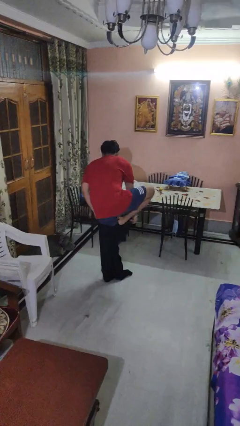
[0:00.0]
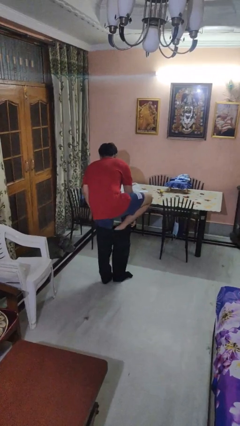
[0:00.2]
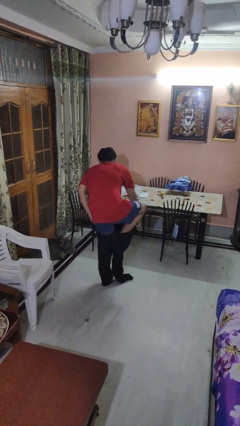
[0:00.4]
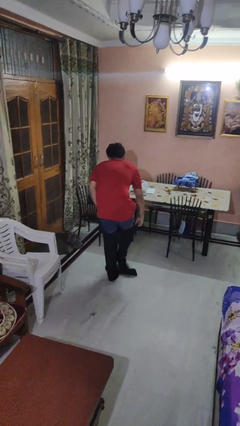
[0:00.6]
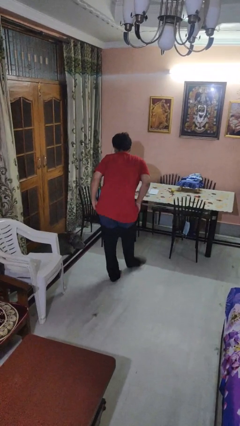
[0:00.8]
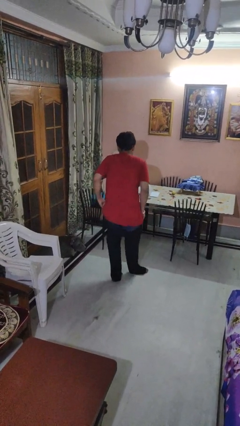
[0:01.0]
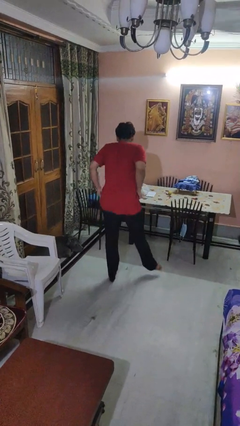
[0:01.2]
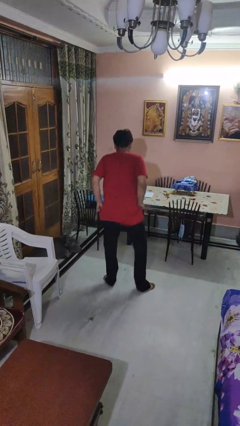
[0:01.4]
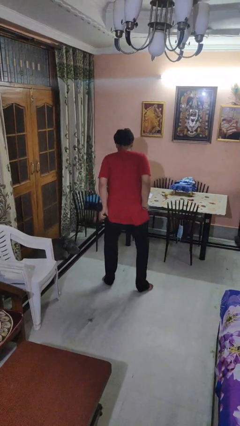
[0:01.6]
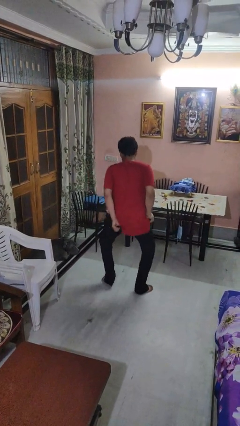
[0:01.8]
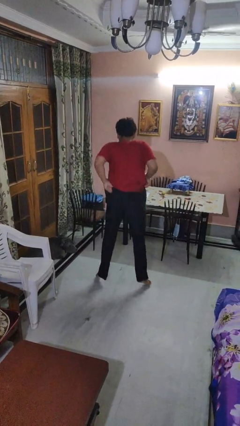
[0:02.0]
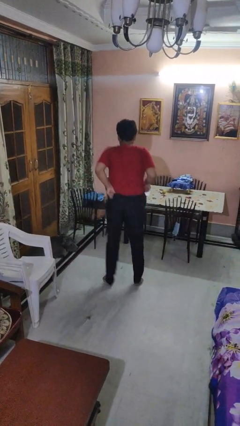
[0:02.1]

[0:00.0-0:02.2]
person puts on pants

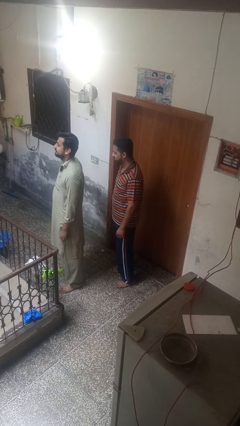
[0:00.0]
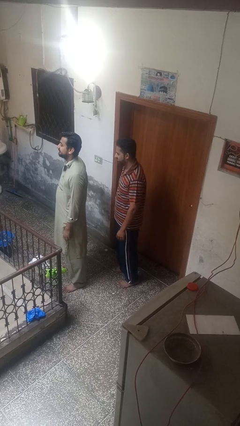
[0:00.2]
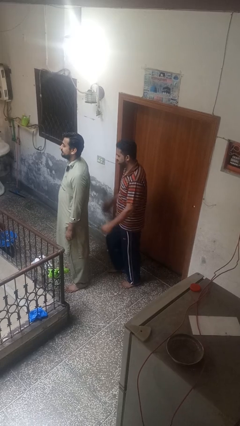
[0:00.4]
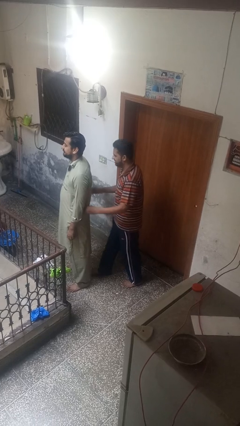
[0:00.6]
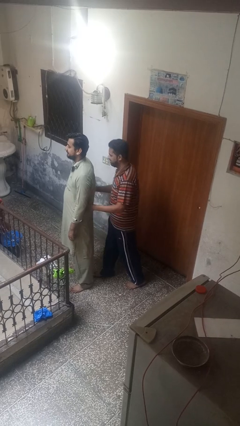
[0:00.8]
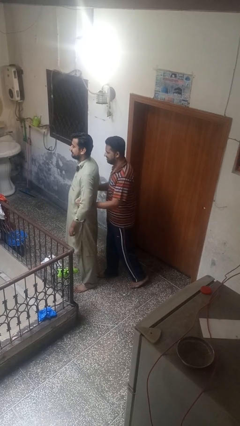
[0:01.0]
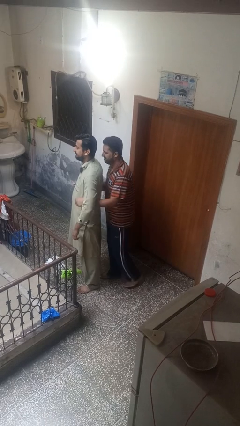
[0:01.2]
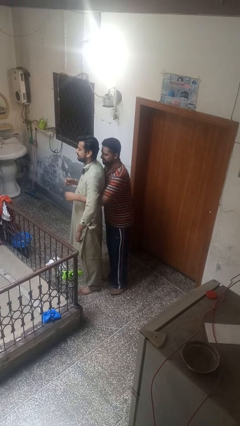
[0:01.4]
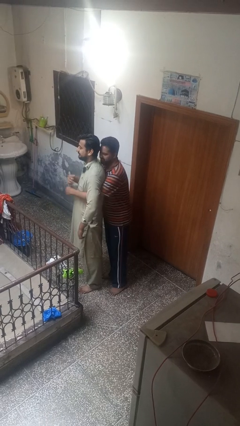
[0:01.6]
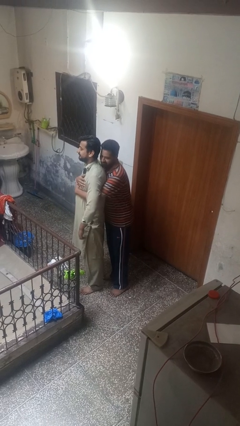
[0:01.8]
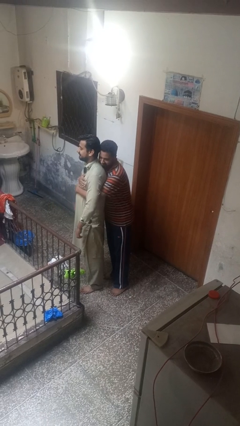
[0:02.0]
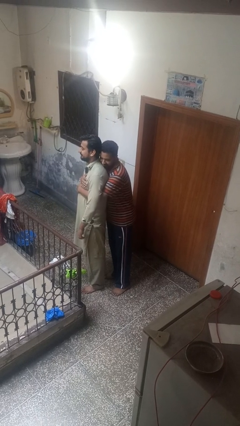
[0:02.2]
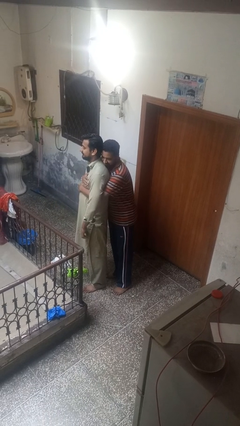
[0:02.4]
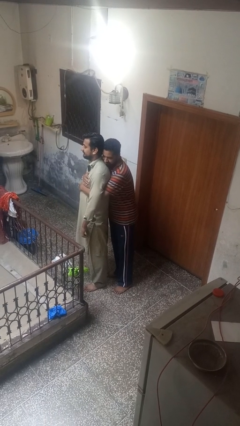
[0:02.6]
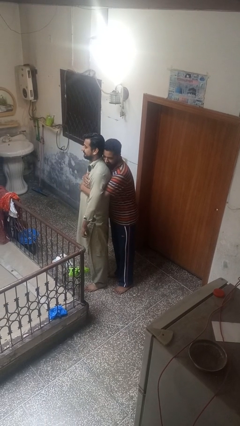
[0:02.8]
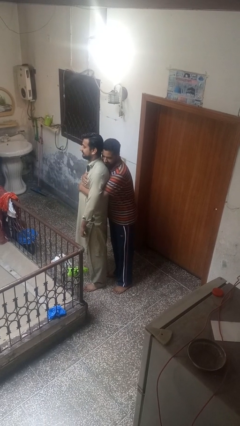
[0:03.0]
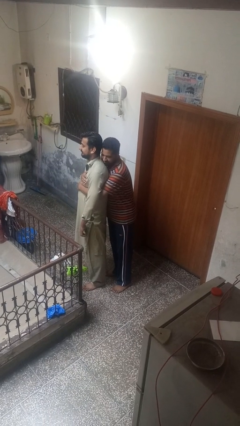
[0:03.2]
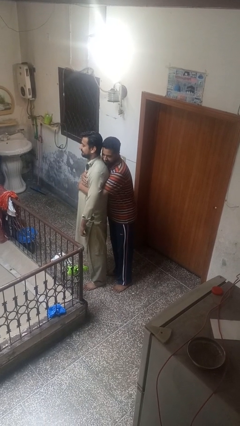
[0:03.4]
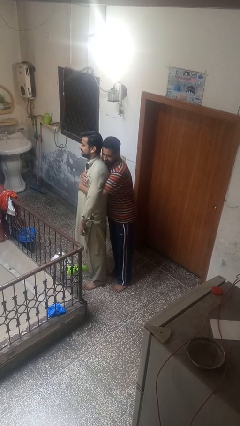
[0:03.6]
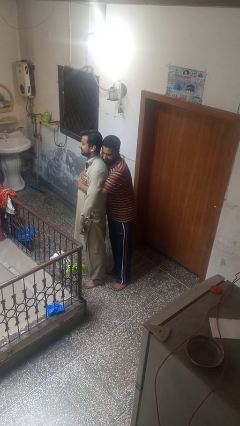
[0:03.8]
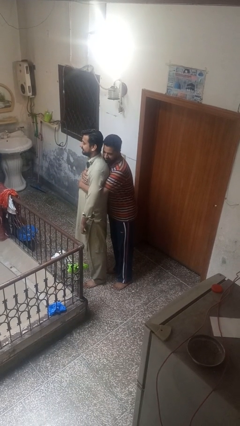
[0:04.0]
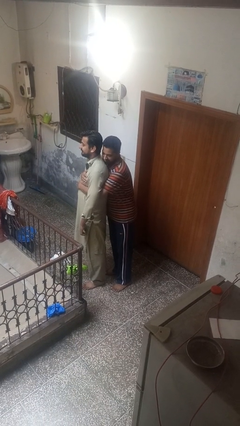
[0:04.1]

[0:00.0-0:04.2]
person hugs person from behind

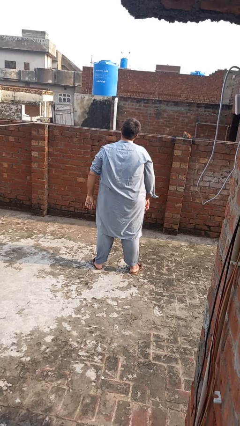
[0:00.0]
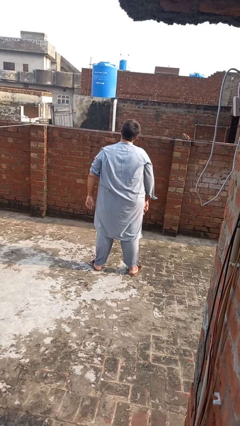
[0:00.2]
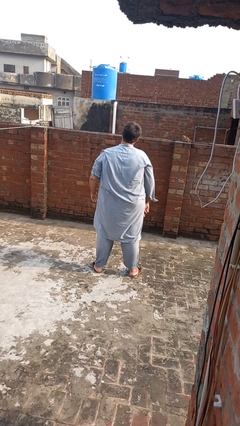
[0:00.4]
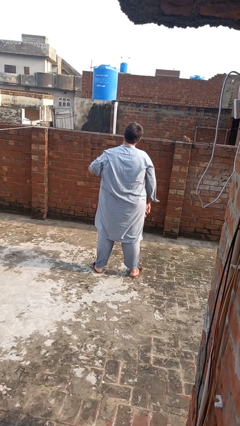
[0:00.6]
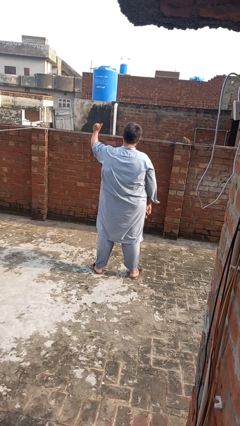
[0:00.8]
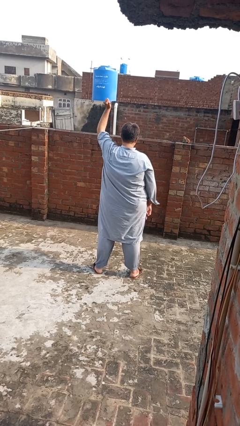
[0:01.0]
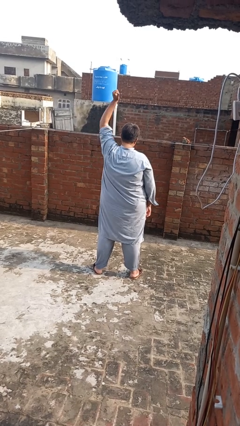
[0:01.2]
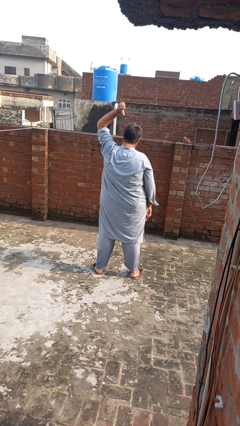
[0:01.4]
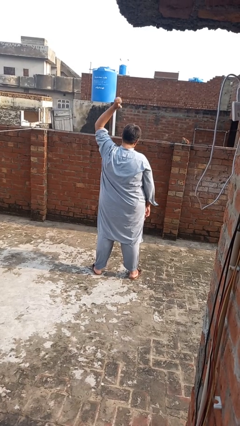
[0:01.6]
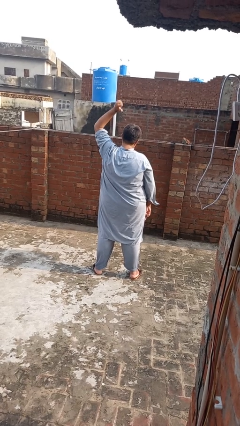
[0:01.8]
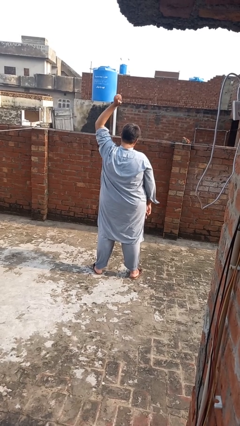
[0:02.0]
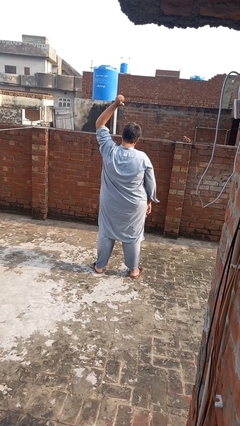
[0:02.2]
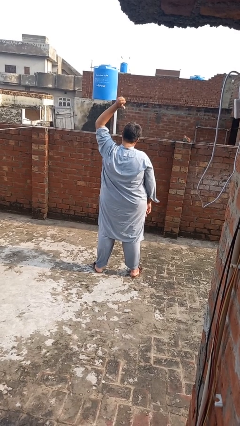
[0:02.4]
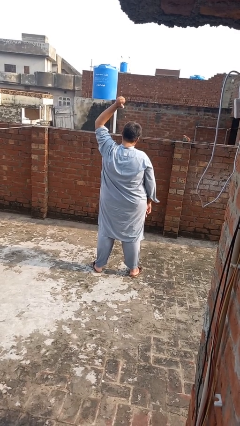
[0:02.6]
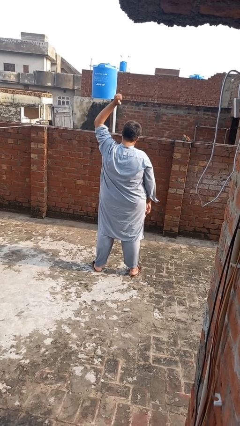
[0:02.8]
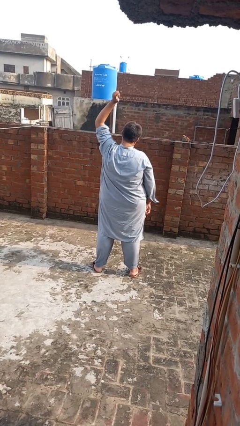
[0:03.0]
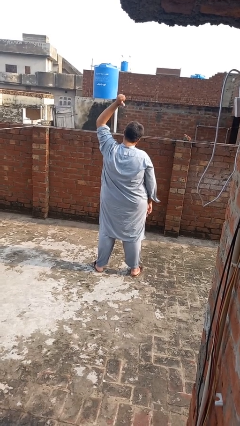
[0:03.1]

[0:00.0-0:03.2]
person gestures behind me

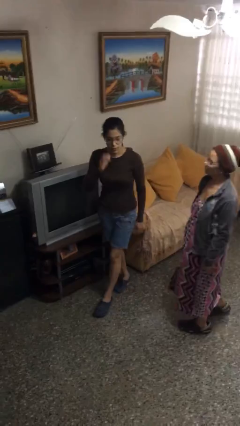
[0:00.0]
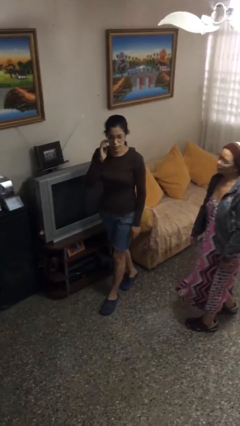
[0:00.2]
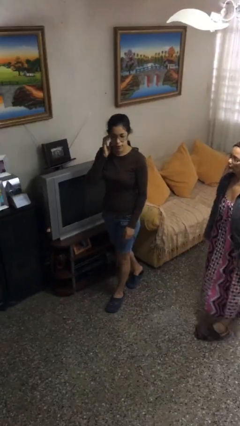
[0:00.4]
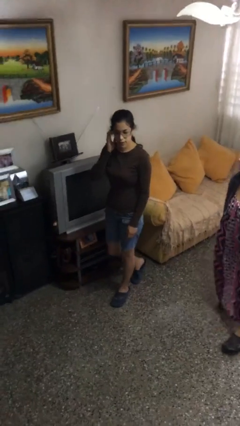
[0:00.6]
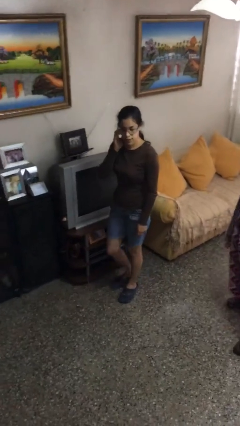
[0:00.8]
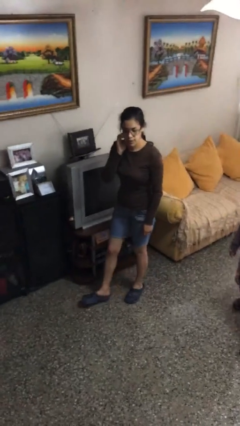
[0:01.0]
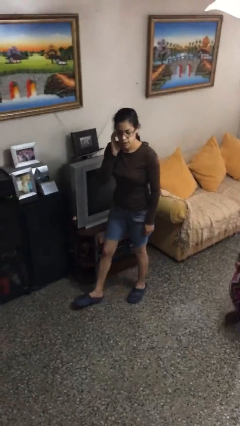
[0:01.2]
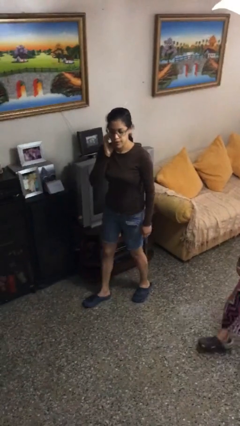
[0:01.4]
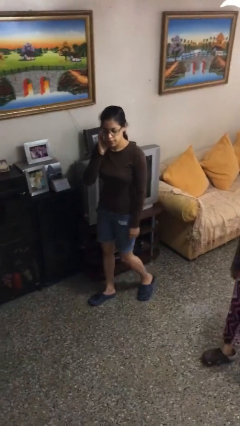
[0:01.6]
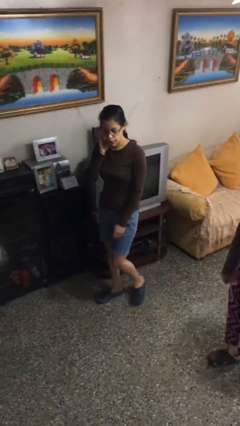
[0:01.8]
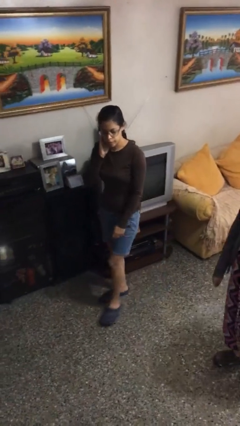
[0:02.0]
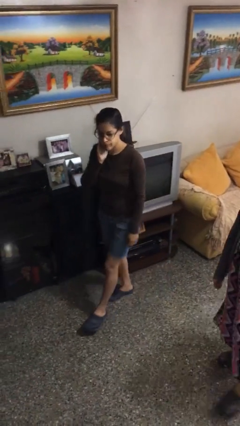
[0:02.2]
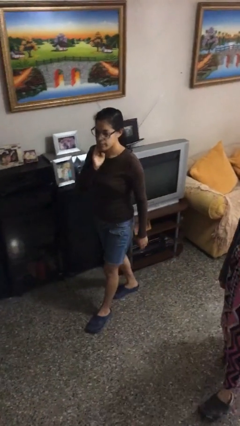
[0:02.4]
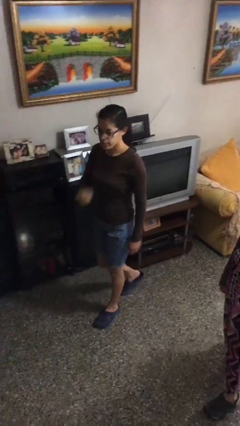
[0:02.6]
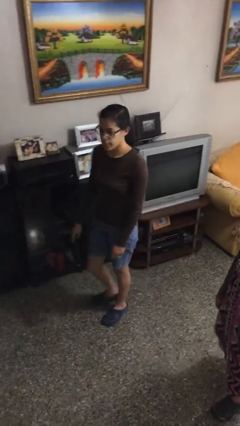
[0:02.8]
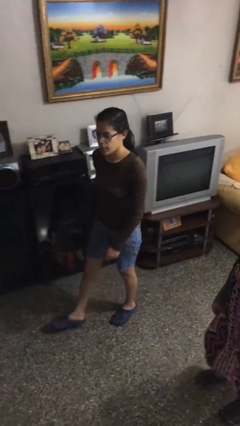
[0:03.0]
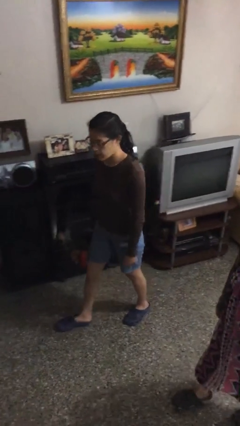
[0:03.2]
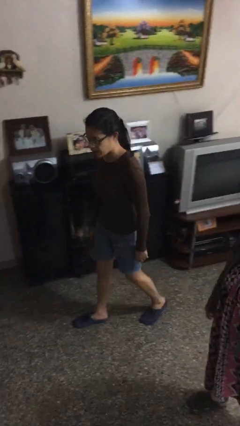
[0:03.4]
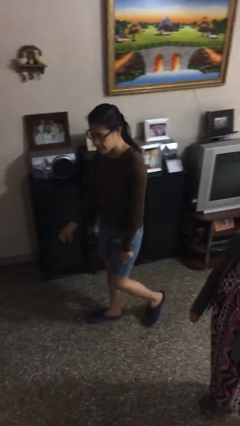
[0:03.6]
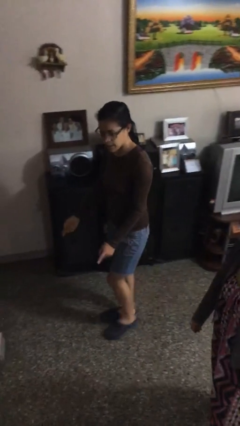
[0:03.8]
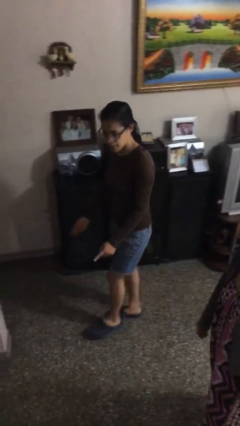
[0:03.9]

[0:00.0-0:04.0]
person talks to person

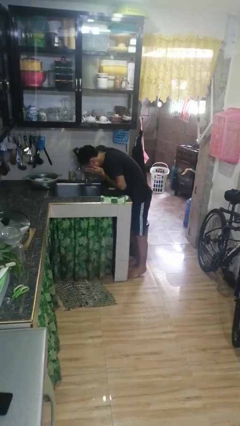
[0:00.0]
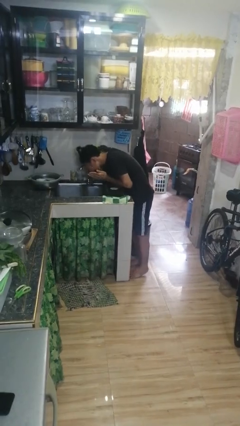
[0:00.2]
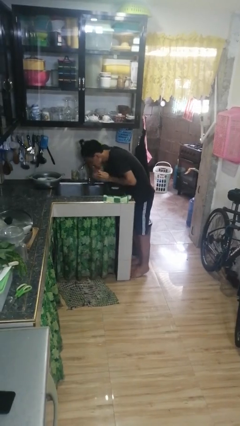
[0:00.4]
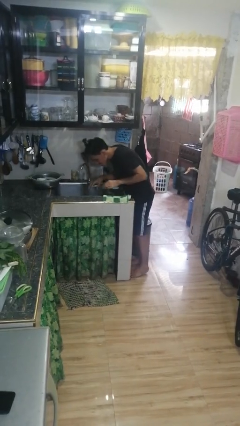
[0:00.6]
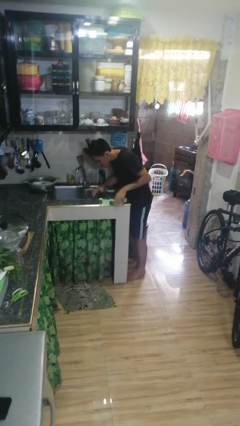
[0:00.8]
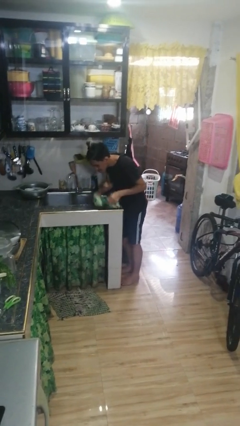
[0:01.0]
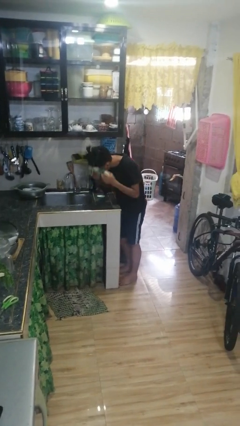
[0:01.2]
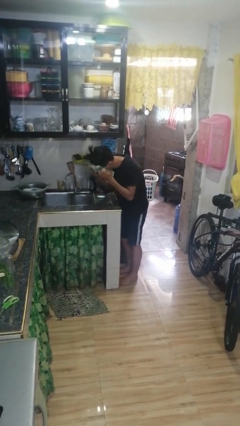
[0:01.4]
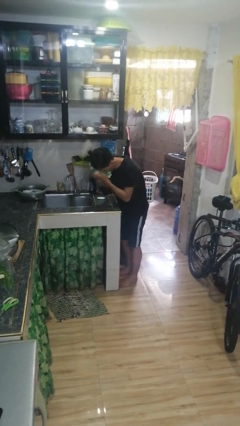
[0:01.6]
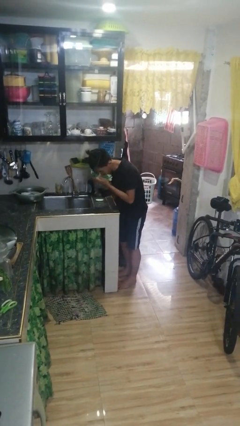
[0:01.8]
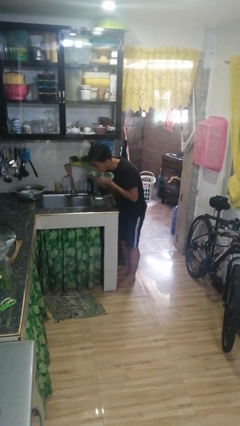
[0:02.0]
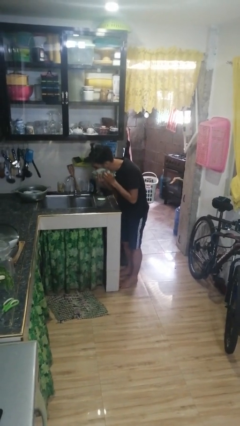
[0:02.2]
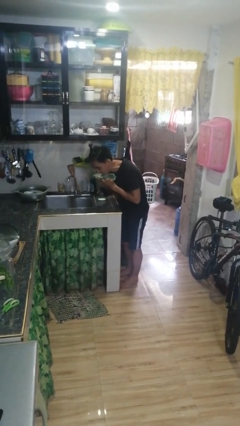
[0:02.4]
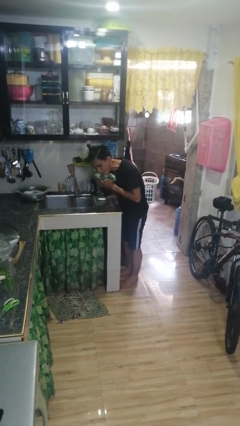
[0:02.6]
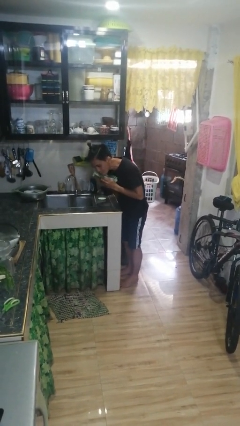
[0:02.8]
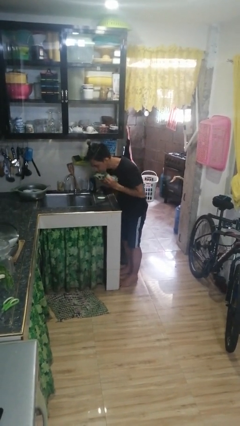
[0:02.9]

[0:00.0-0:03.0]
person dries face with towel

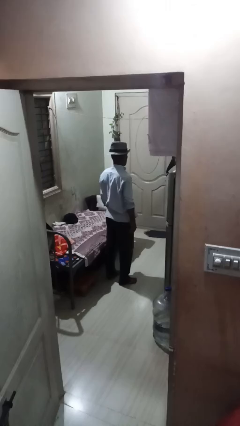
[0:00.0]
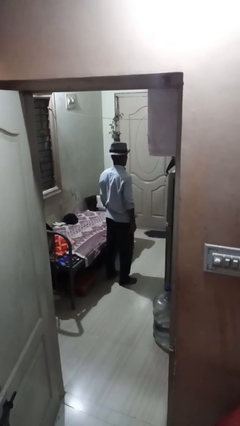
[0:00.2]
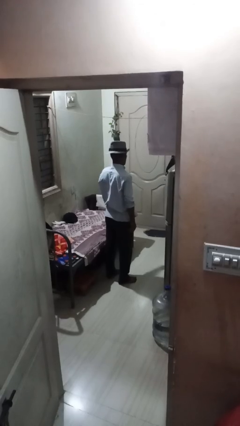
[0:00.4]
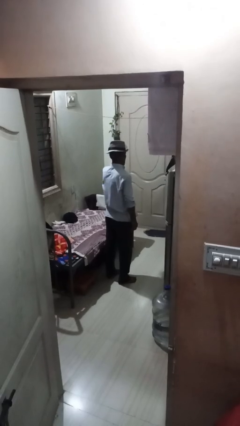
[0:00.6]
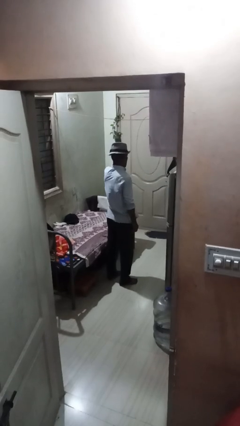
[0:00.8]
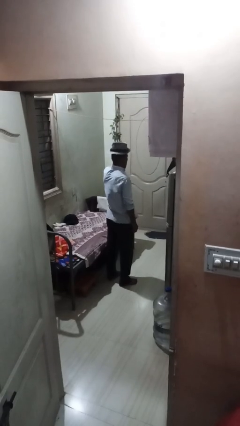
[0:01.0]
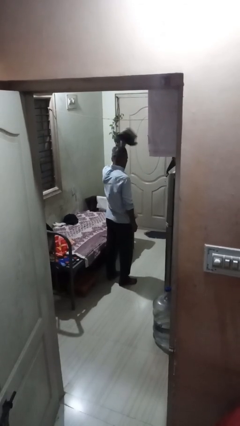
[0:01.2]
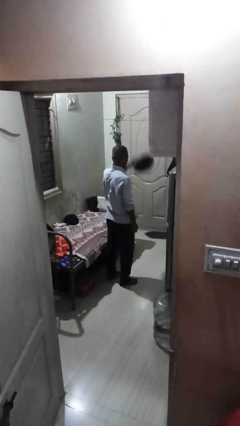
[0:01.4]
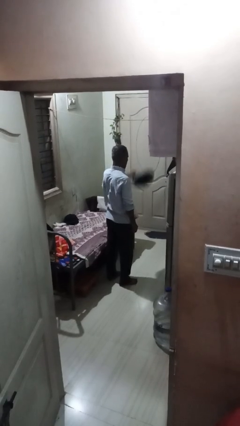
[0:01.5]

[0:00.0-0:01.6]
person takes off hat
